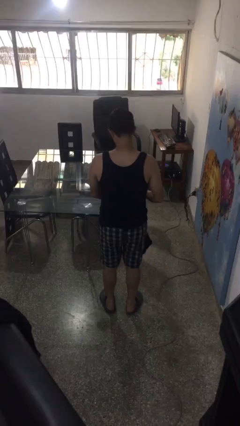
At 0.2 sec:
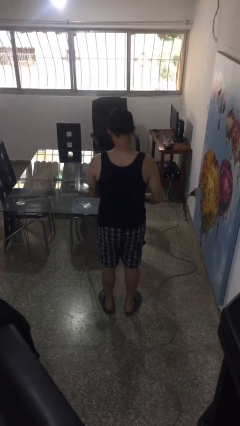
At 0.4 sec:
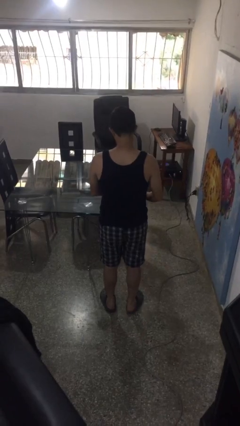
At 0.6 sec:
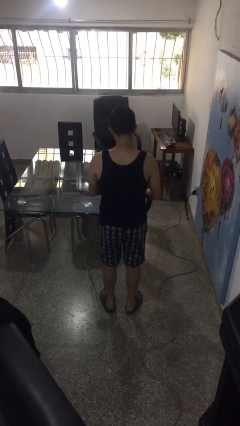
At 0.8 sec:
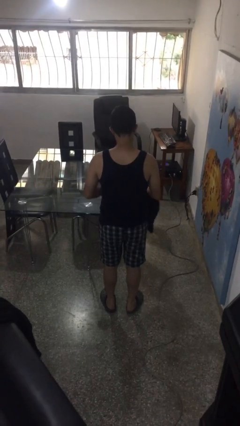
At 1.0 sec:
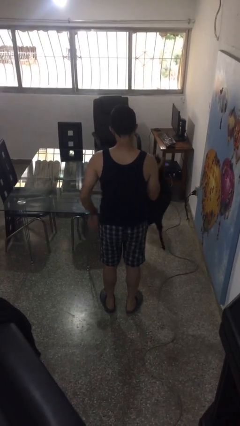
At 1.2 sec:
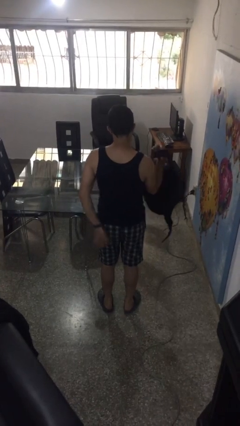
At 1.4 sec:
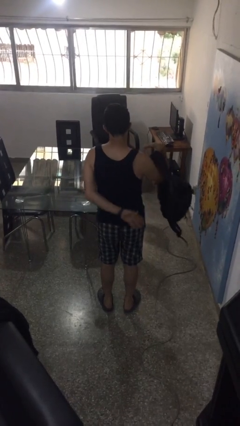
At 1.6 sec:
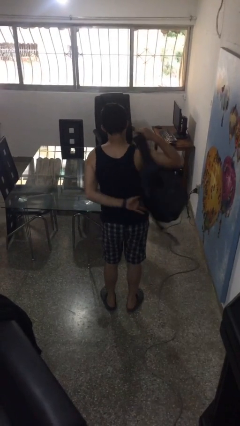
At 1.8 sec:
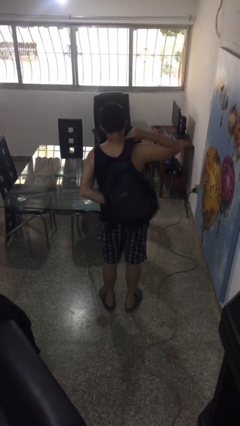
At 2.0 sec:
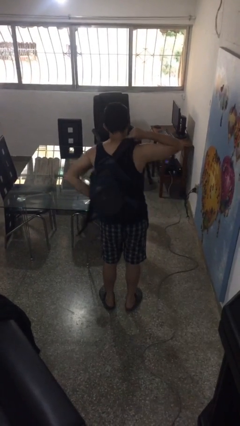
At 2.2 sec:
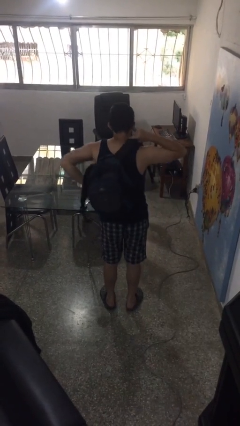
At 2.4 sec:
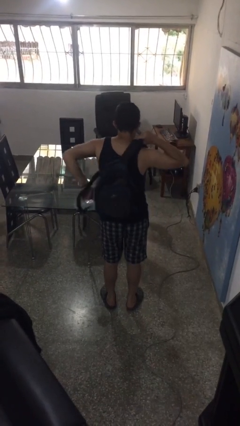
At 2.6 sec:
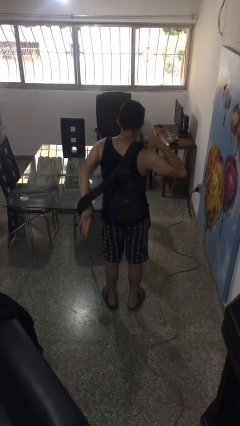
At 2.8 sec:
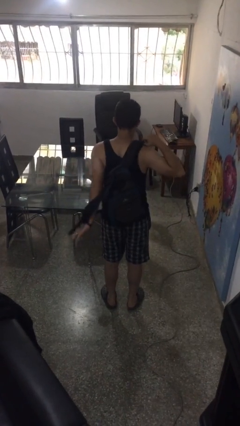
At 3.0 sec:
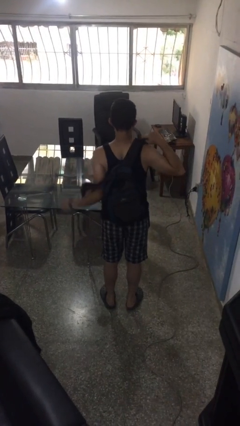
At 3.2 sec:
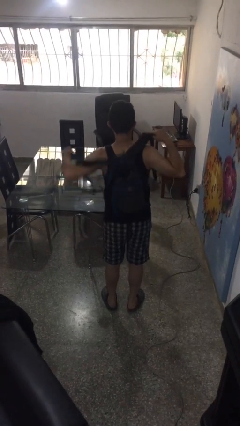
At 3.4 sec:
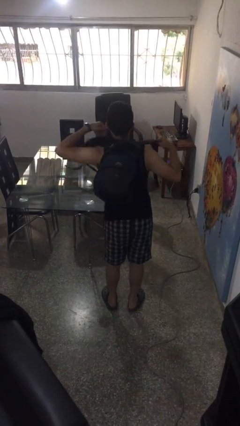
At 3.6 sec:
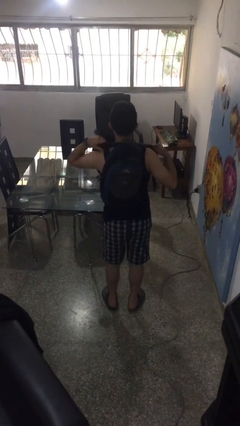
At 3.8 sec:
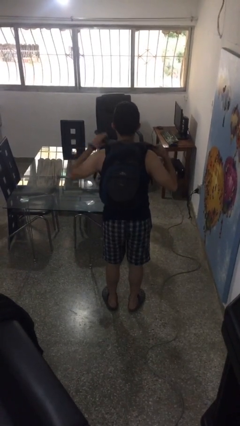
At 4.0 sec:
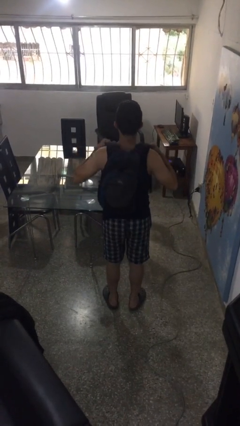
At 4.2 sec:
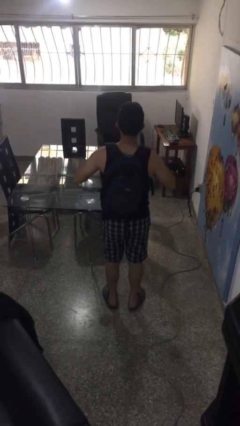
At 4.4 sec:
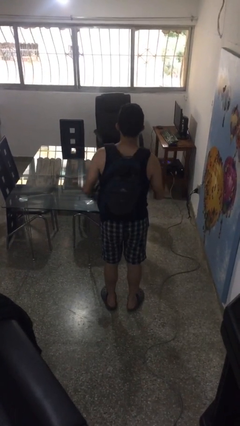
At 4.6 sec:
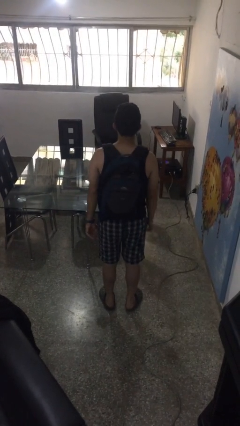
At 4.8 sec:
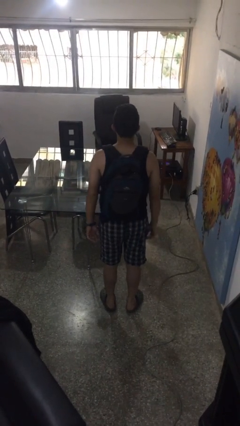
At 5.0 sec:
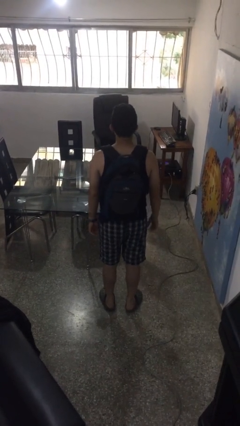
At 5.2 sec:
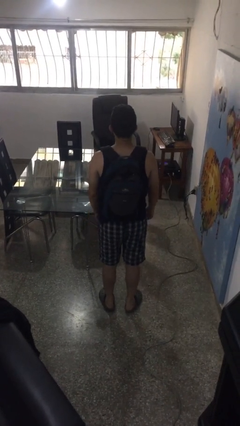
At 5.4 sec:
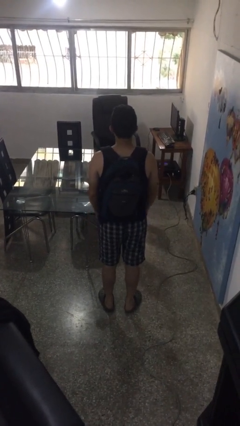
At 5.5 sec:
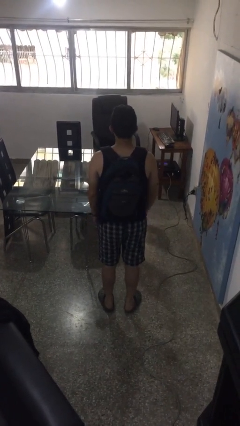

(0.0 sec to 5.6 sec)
person puts on backpack

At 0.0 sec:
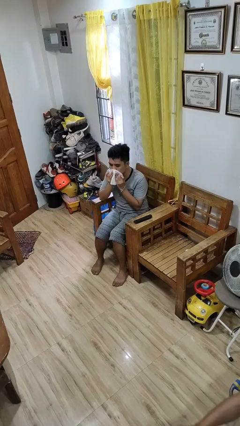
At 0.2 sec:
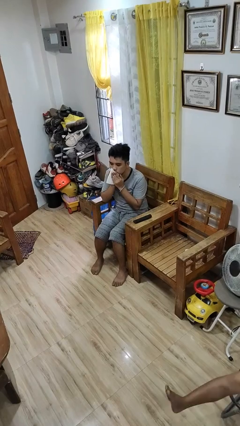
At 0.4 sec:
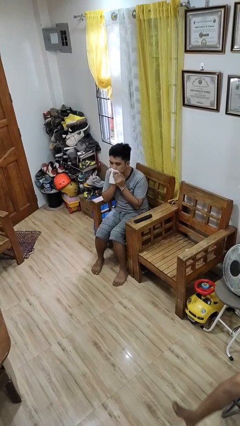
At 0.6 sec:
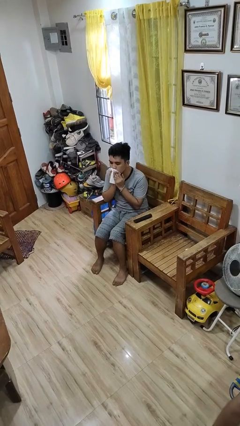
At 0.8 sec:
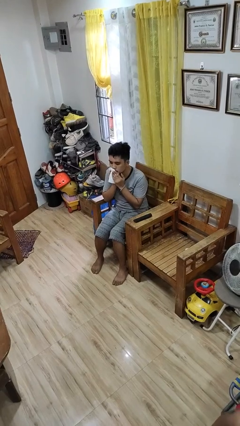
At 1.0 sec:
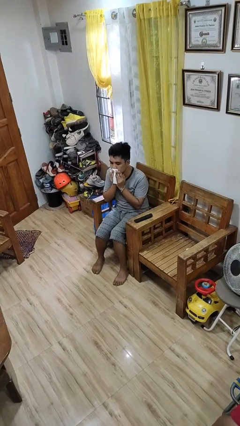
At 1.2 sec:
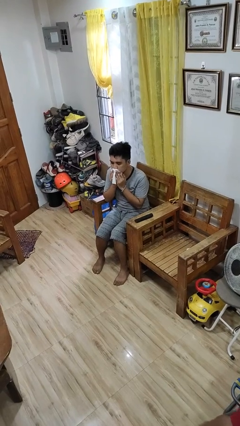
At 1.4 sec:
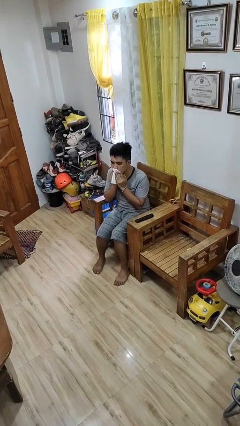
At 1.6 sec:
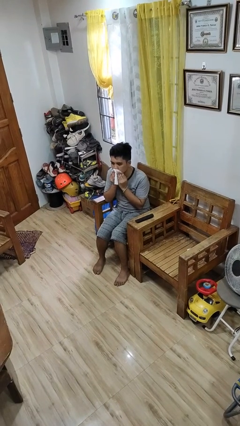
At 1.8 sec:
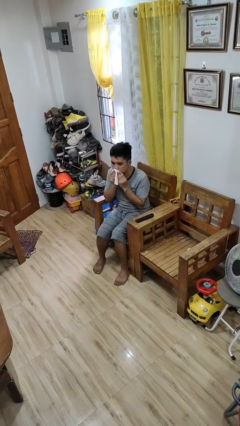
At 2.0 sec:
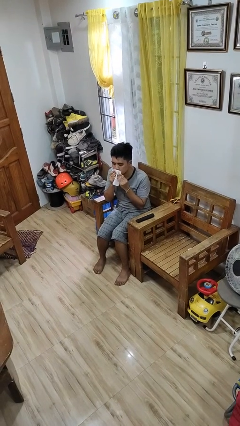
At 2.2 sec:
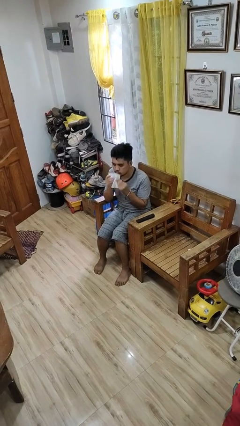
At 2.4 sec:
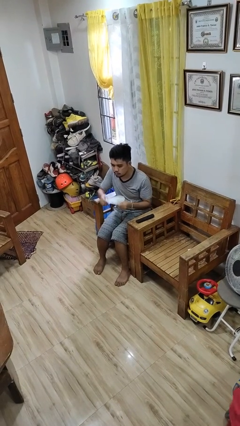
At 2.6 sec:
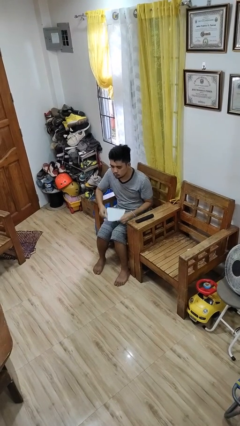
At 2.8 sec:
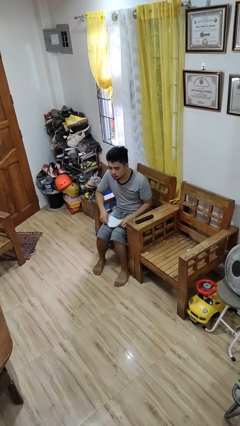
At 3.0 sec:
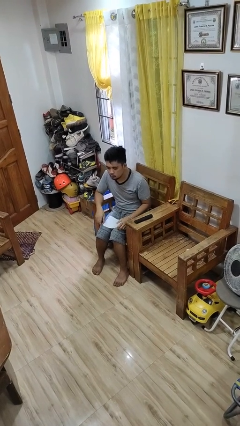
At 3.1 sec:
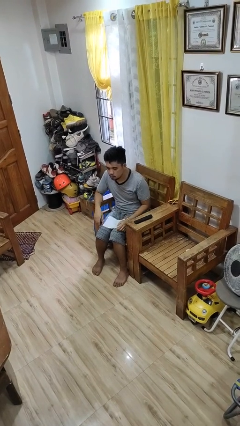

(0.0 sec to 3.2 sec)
person wipes mouth with napkin

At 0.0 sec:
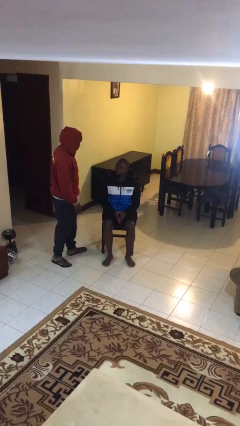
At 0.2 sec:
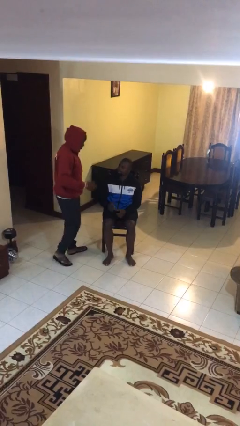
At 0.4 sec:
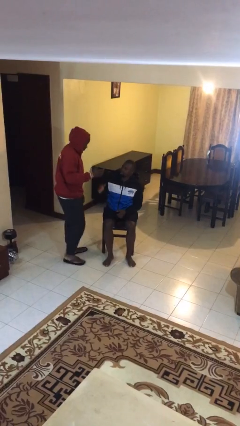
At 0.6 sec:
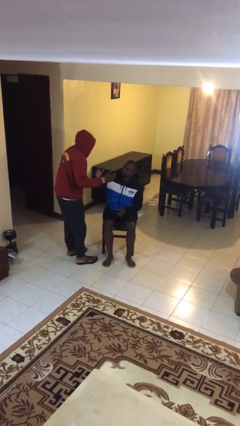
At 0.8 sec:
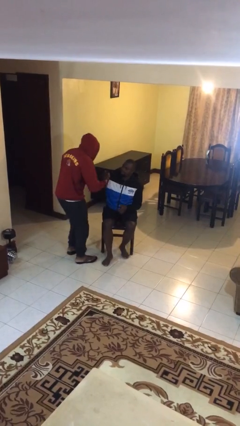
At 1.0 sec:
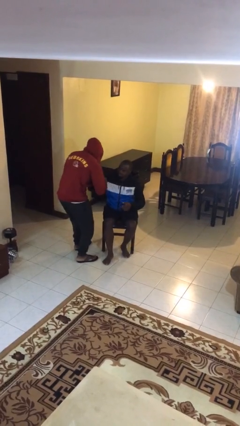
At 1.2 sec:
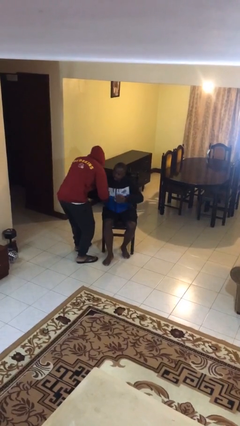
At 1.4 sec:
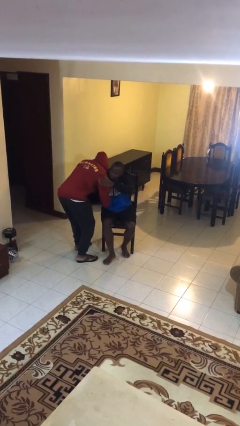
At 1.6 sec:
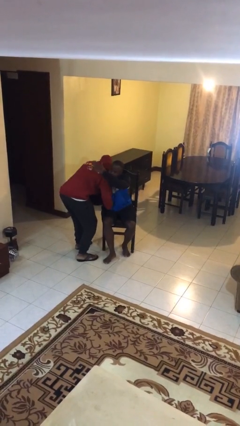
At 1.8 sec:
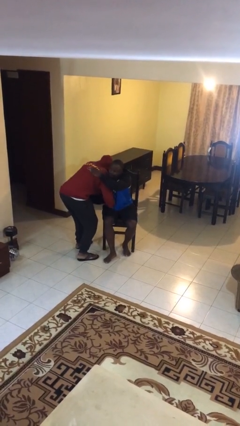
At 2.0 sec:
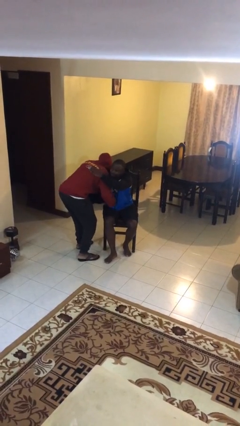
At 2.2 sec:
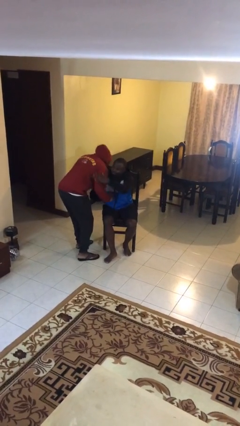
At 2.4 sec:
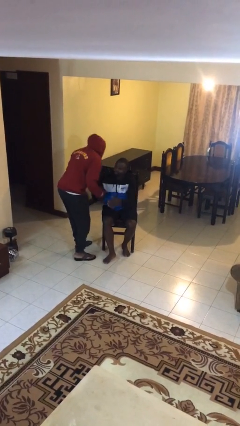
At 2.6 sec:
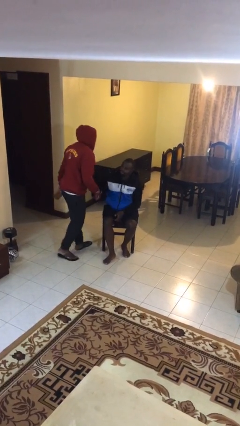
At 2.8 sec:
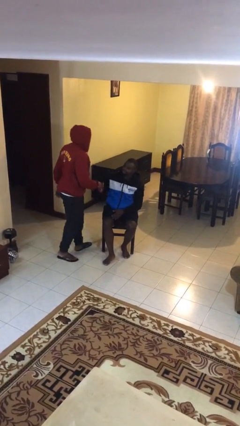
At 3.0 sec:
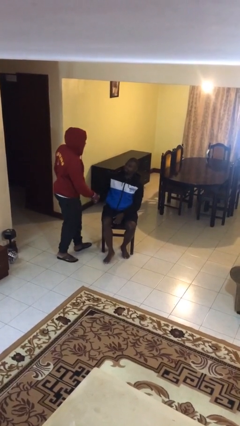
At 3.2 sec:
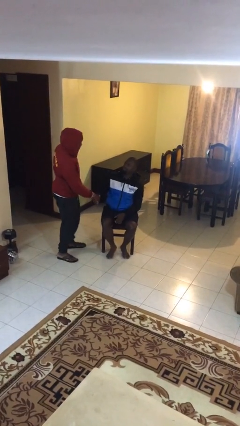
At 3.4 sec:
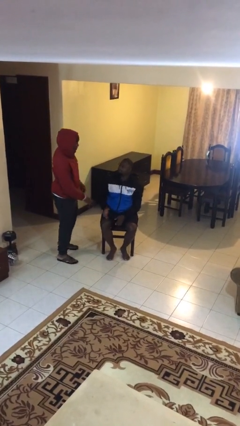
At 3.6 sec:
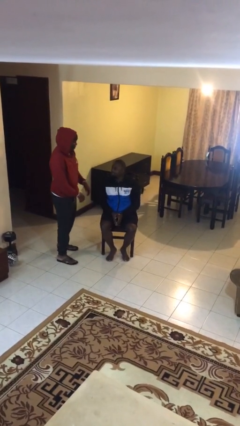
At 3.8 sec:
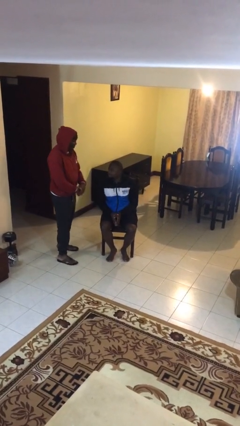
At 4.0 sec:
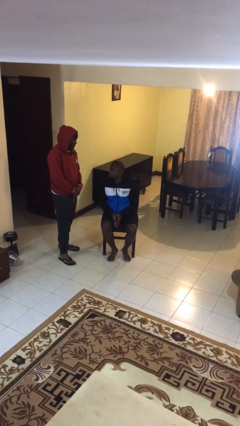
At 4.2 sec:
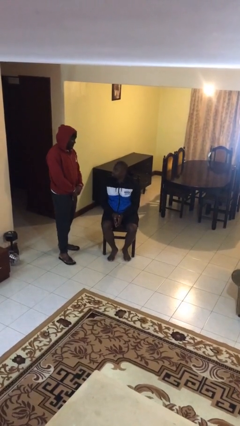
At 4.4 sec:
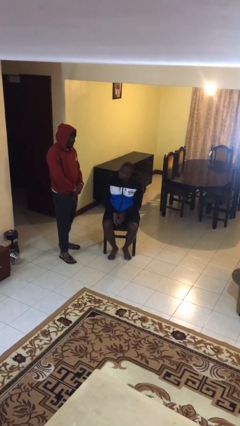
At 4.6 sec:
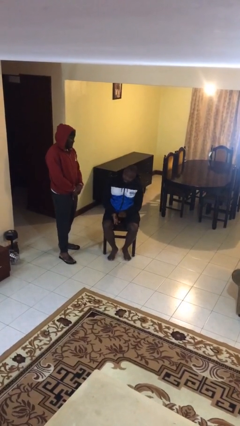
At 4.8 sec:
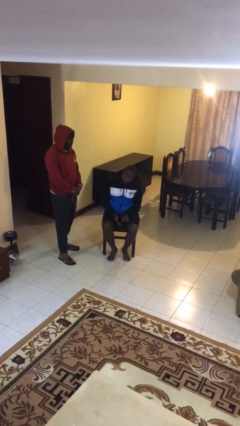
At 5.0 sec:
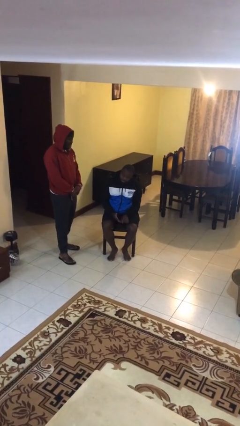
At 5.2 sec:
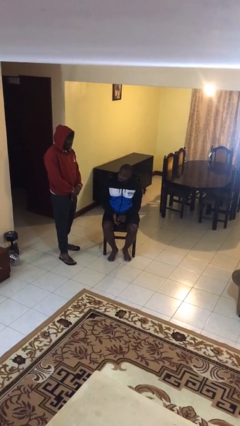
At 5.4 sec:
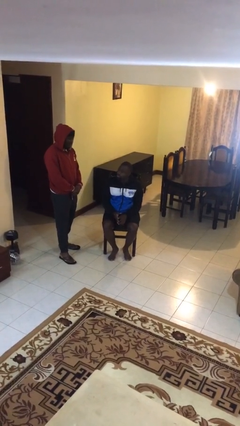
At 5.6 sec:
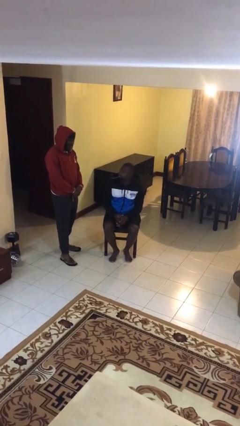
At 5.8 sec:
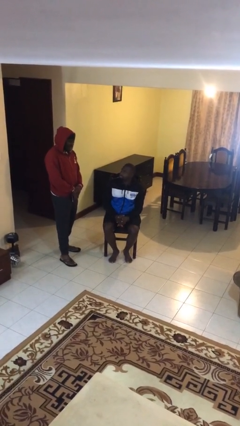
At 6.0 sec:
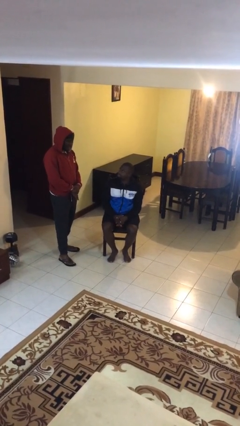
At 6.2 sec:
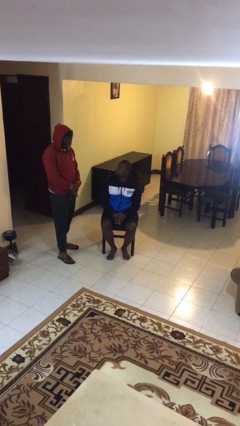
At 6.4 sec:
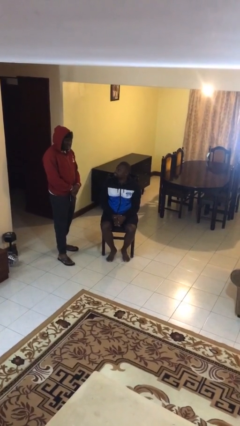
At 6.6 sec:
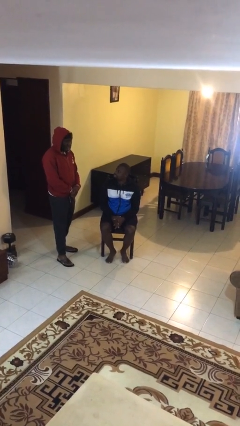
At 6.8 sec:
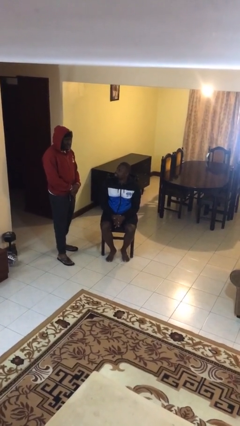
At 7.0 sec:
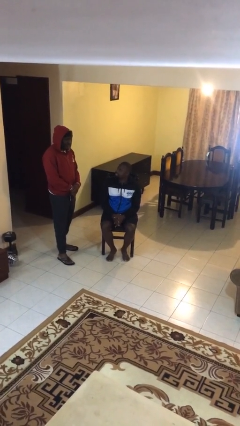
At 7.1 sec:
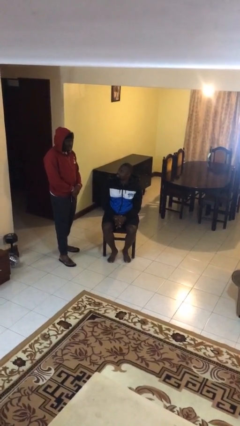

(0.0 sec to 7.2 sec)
person embraces person

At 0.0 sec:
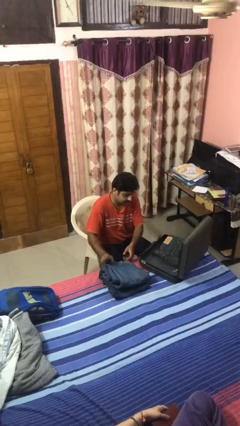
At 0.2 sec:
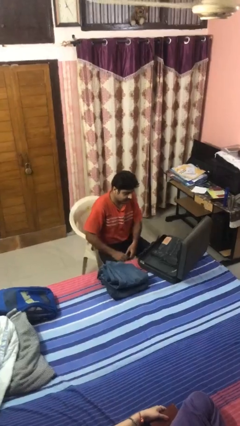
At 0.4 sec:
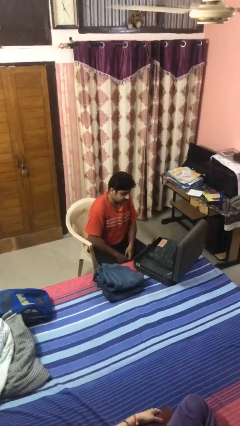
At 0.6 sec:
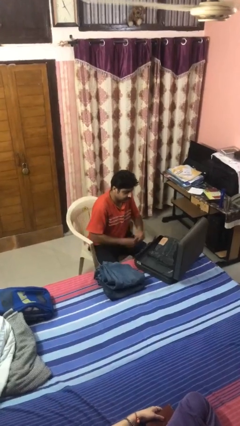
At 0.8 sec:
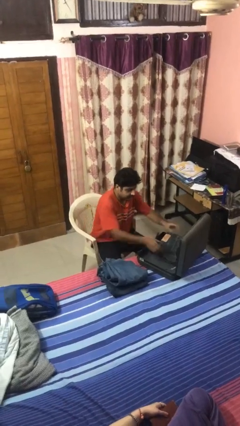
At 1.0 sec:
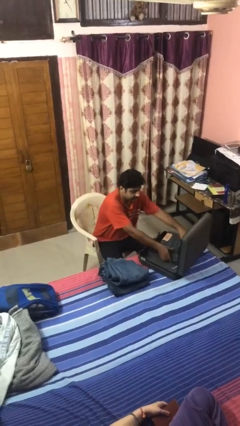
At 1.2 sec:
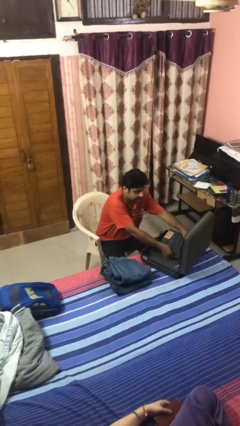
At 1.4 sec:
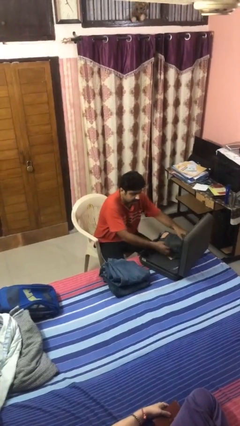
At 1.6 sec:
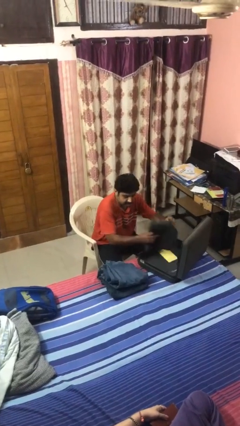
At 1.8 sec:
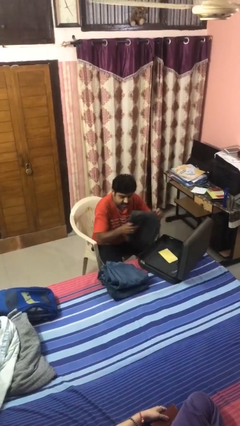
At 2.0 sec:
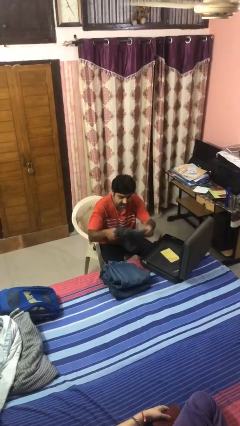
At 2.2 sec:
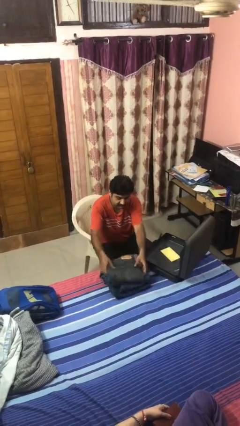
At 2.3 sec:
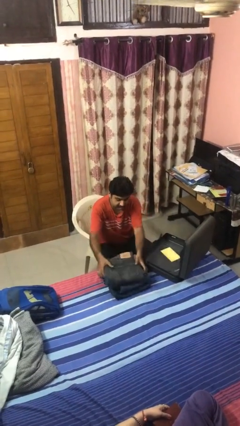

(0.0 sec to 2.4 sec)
person unloads clothes from suitcase
